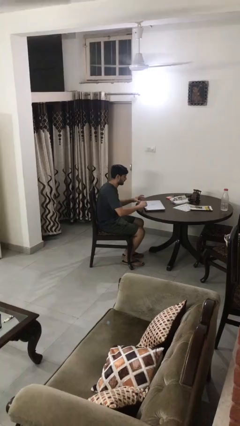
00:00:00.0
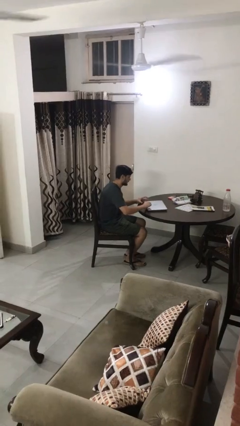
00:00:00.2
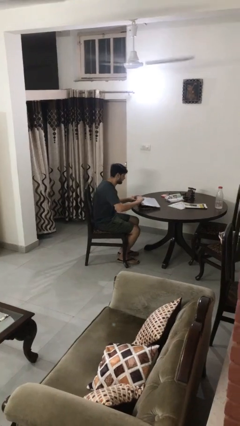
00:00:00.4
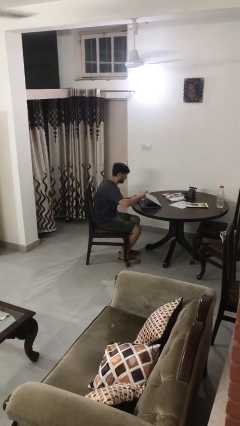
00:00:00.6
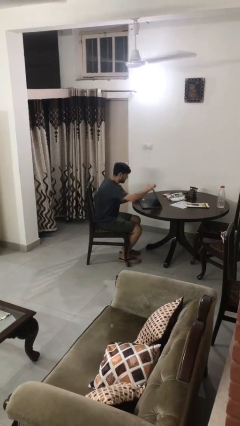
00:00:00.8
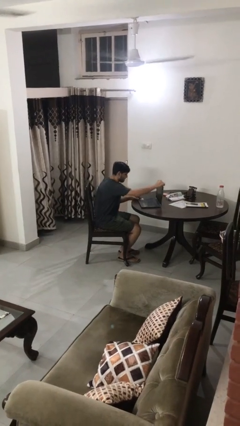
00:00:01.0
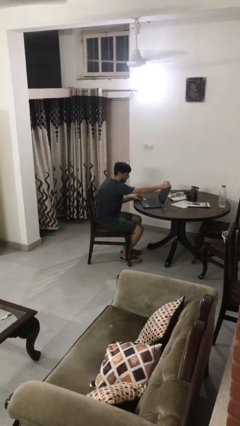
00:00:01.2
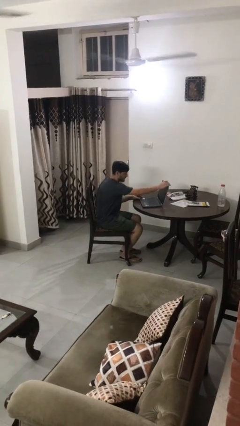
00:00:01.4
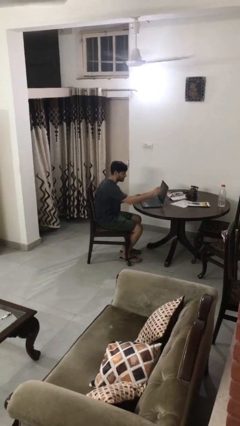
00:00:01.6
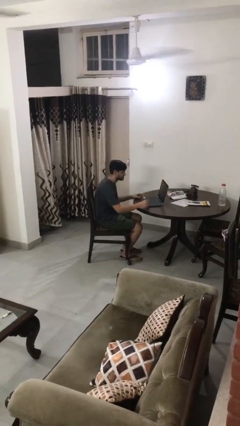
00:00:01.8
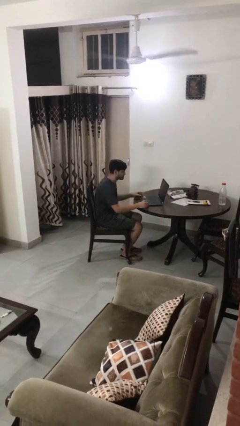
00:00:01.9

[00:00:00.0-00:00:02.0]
person opens laptop

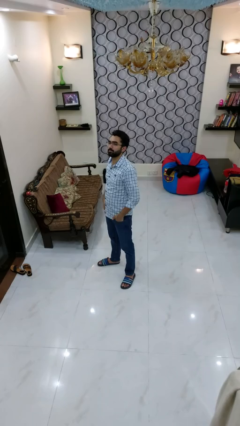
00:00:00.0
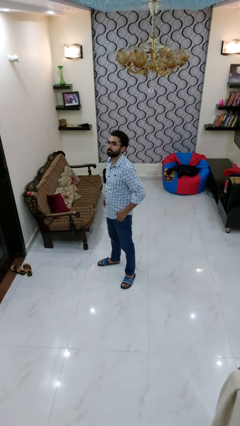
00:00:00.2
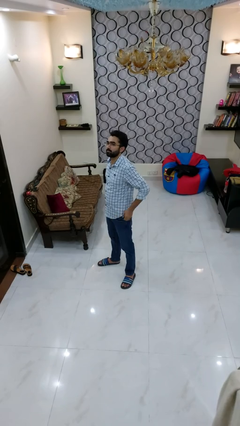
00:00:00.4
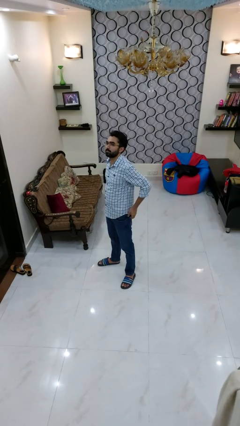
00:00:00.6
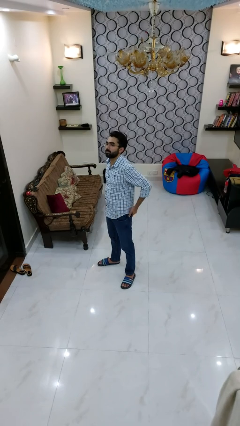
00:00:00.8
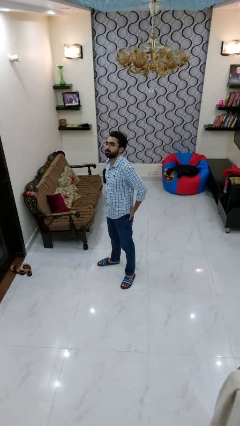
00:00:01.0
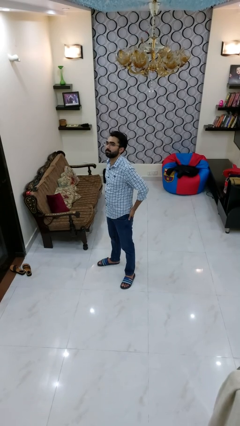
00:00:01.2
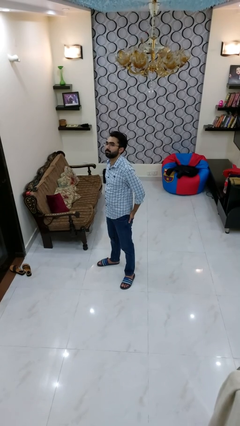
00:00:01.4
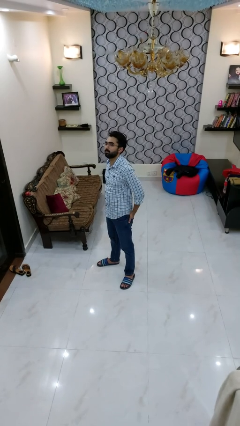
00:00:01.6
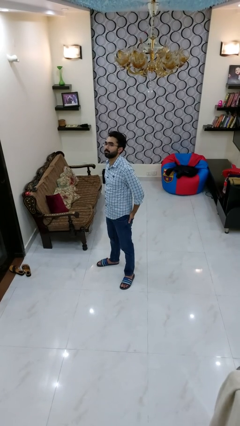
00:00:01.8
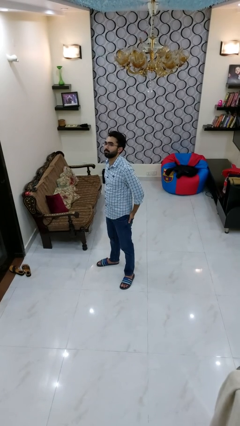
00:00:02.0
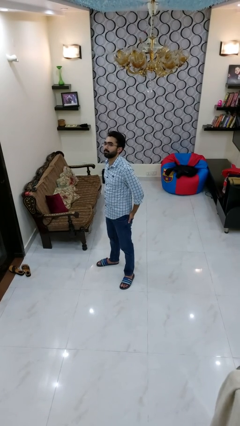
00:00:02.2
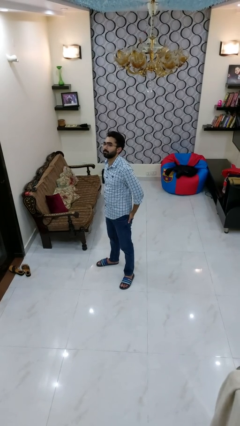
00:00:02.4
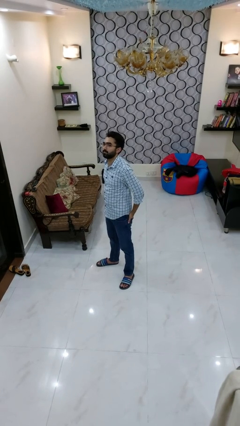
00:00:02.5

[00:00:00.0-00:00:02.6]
person puts hands in back pockets

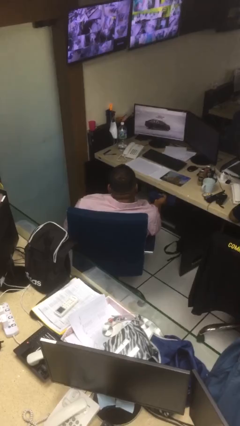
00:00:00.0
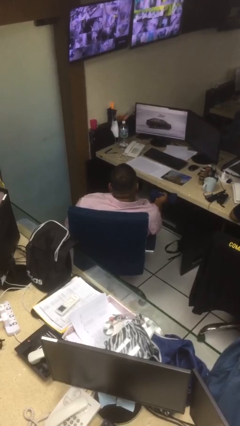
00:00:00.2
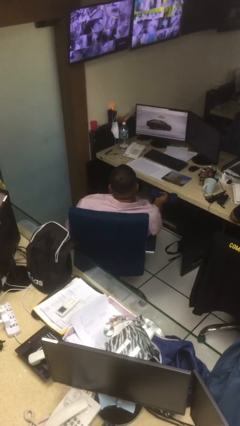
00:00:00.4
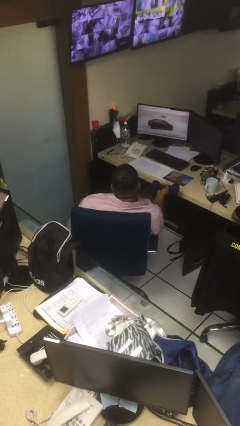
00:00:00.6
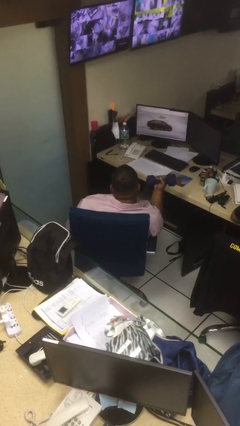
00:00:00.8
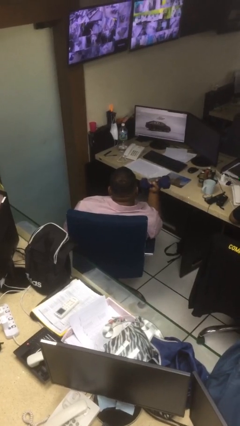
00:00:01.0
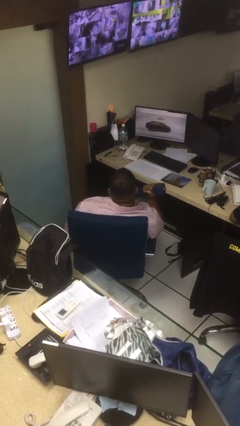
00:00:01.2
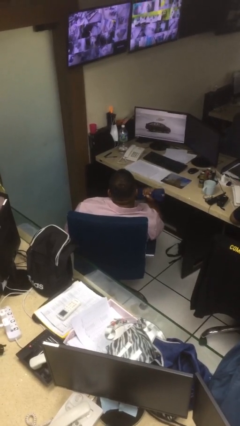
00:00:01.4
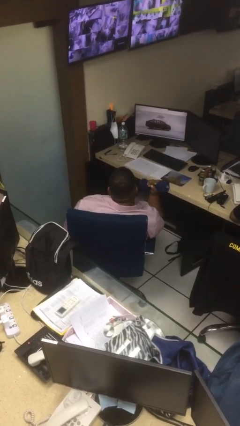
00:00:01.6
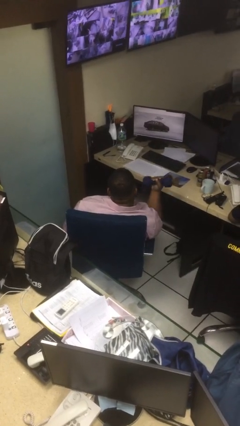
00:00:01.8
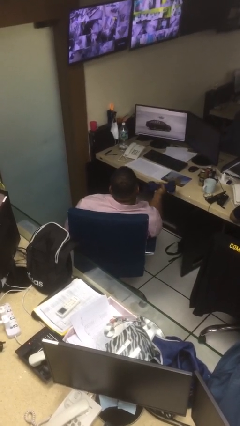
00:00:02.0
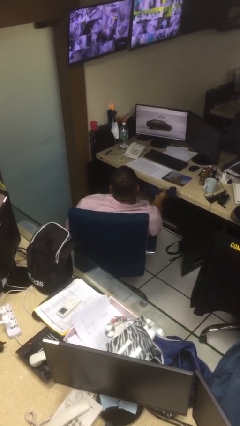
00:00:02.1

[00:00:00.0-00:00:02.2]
person lifts dumbbells

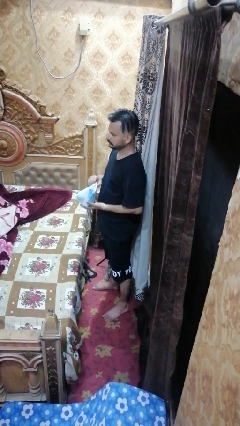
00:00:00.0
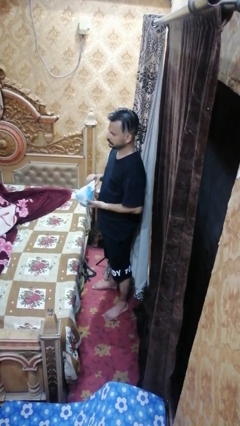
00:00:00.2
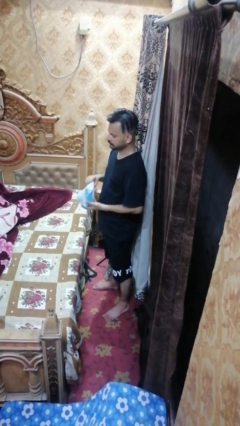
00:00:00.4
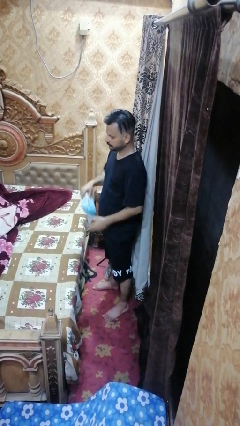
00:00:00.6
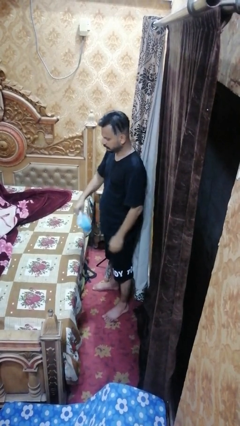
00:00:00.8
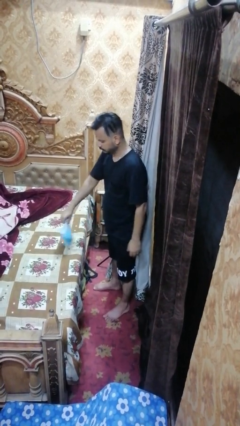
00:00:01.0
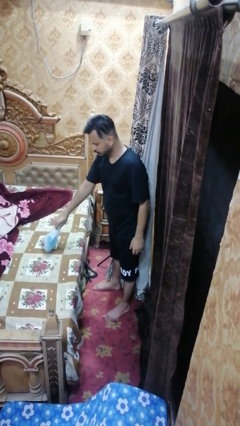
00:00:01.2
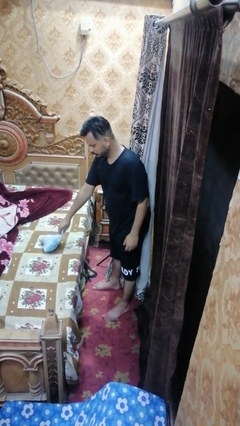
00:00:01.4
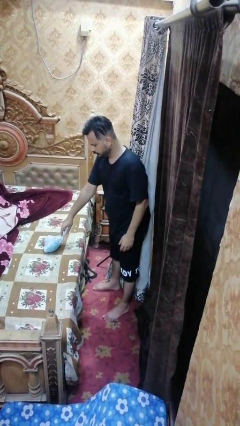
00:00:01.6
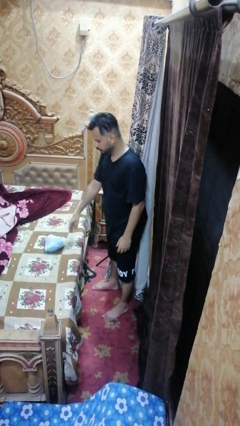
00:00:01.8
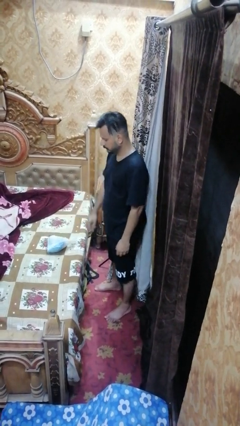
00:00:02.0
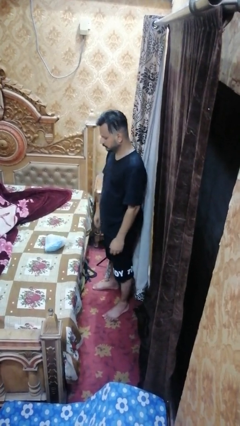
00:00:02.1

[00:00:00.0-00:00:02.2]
person puts down object on bed

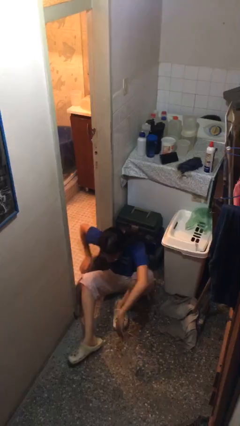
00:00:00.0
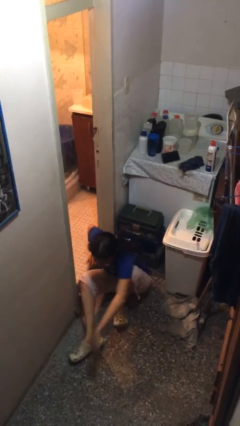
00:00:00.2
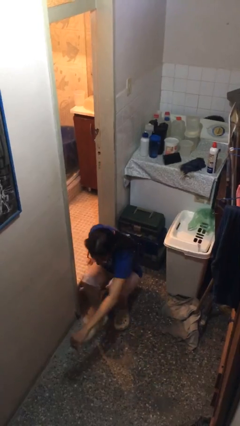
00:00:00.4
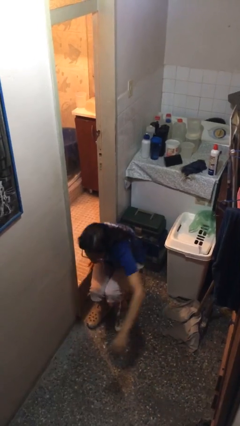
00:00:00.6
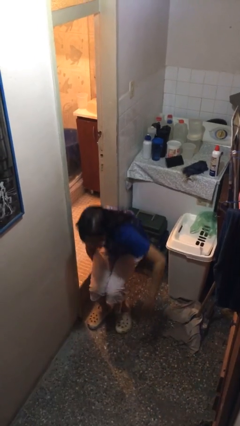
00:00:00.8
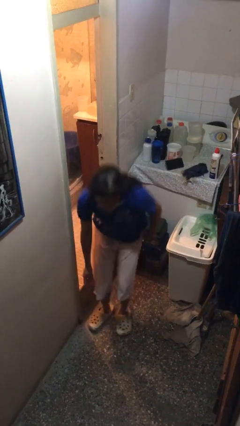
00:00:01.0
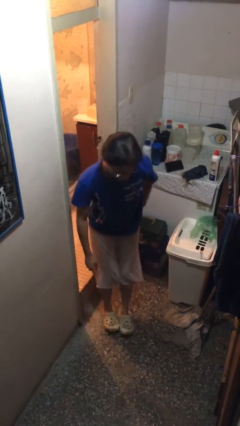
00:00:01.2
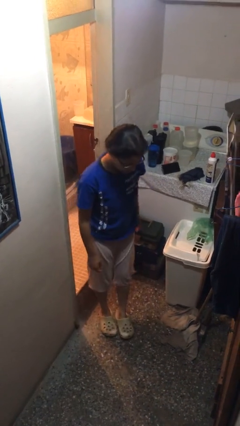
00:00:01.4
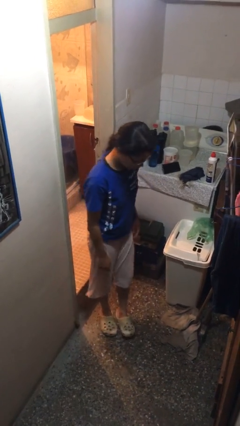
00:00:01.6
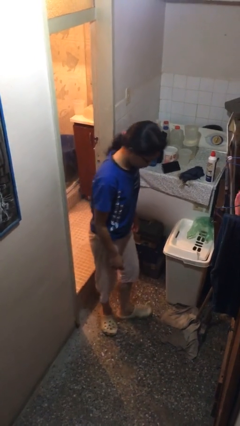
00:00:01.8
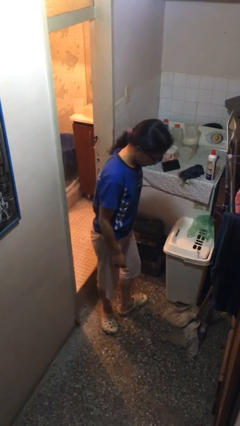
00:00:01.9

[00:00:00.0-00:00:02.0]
person stands up

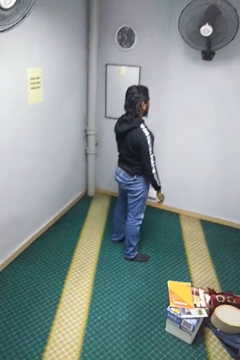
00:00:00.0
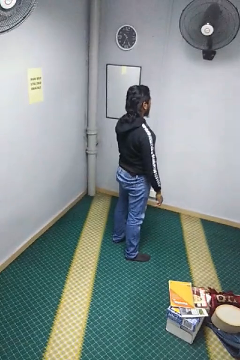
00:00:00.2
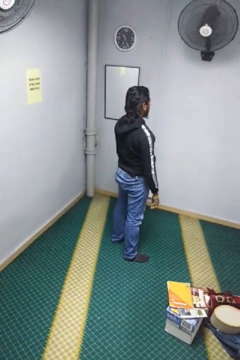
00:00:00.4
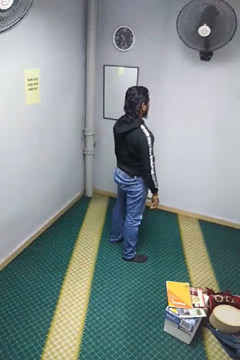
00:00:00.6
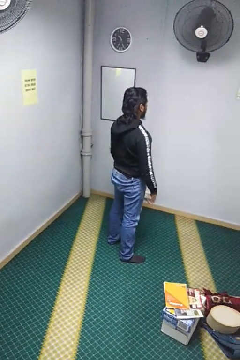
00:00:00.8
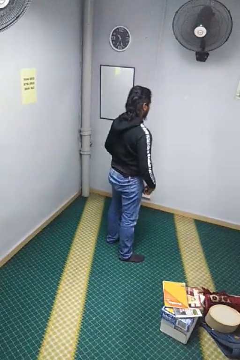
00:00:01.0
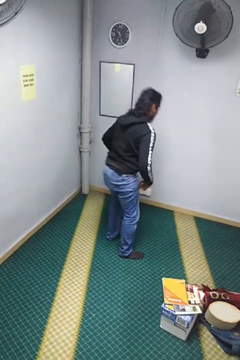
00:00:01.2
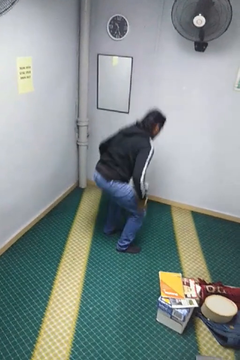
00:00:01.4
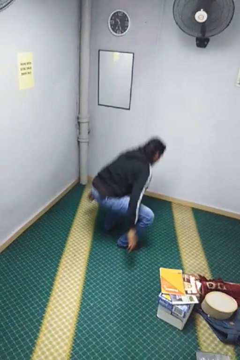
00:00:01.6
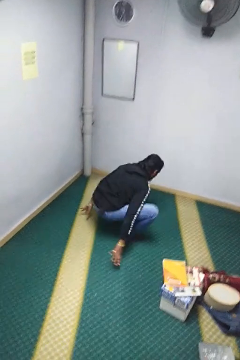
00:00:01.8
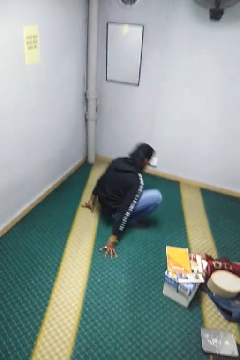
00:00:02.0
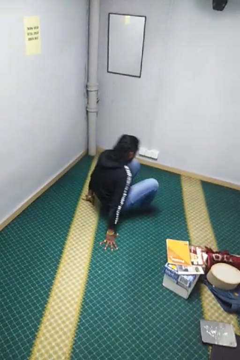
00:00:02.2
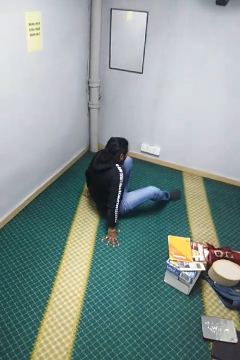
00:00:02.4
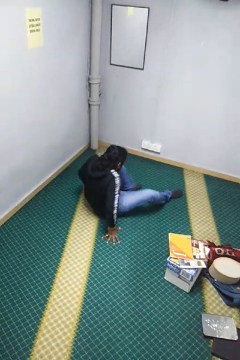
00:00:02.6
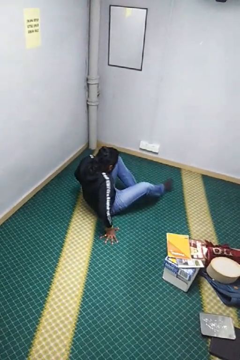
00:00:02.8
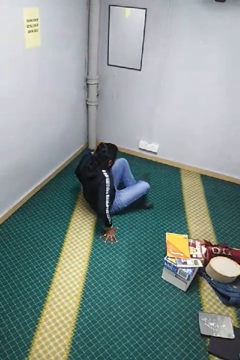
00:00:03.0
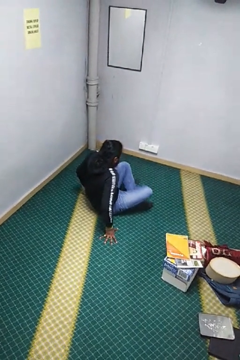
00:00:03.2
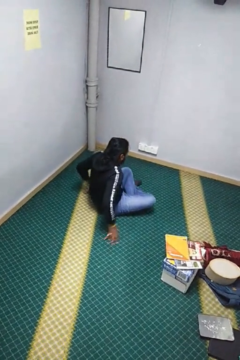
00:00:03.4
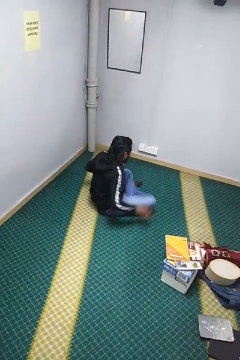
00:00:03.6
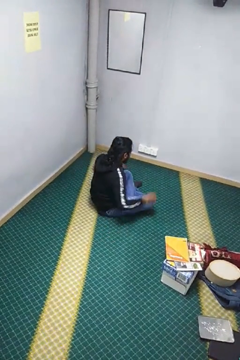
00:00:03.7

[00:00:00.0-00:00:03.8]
person sits crisscross

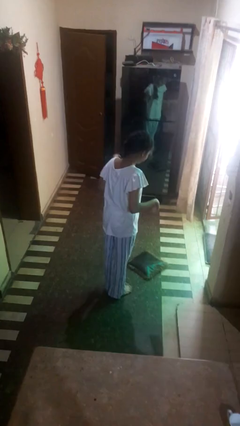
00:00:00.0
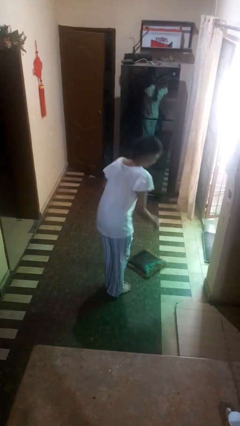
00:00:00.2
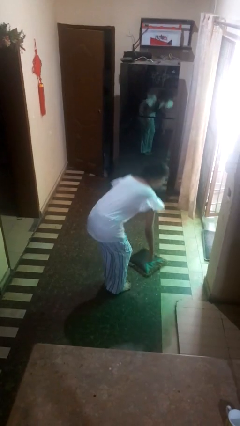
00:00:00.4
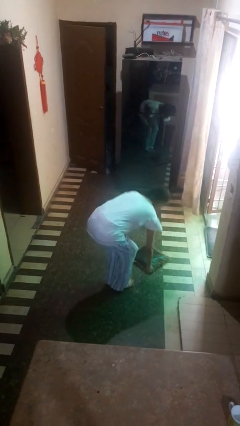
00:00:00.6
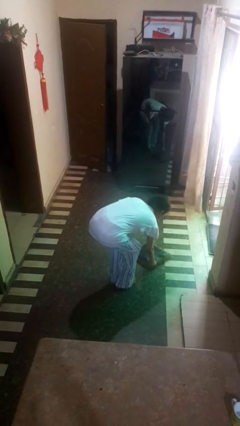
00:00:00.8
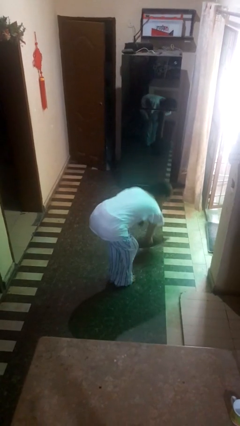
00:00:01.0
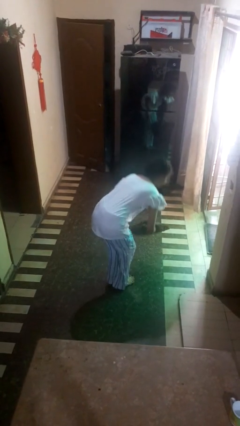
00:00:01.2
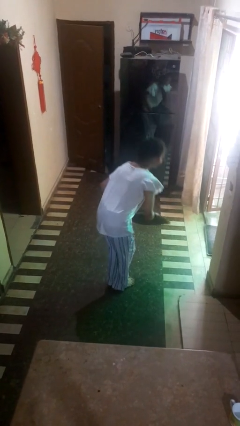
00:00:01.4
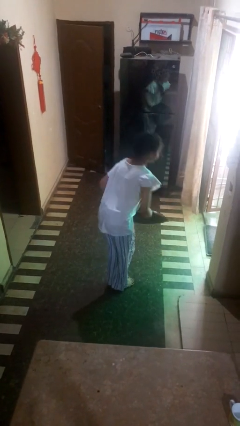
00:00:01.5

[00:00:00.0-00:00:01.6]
person picks up object from floor

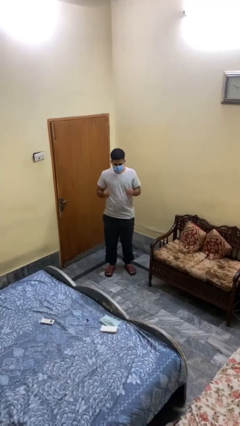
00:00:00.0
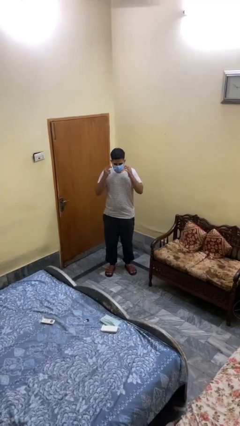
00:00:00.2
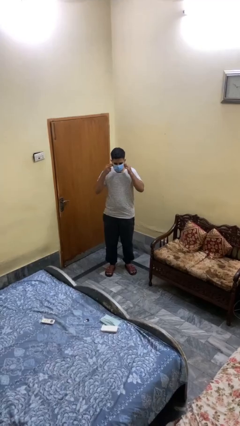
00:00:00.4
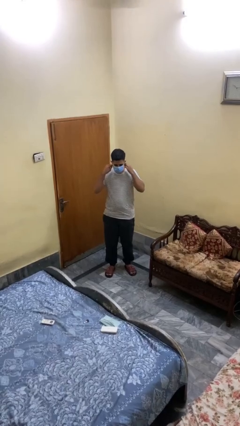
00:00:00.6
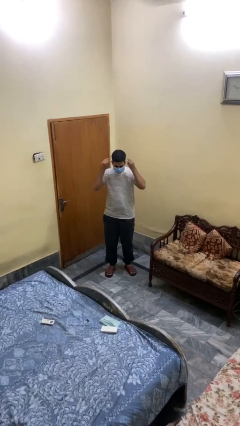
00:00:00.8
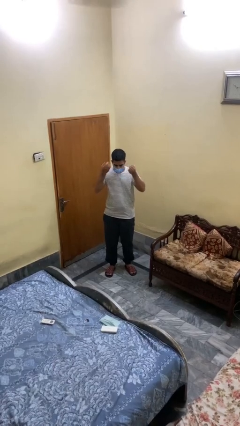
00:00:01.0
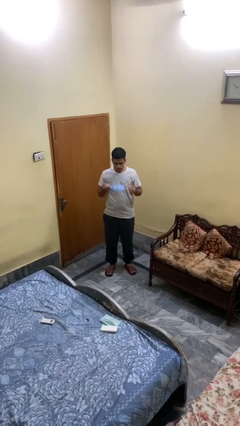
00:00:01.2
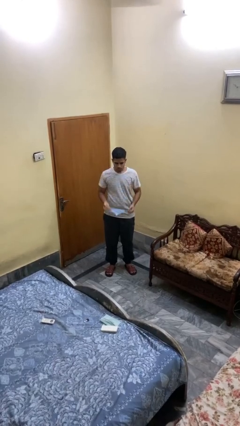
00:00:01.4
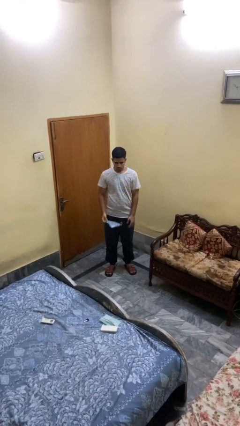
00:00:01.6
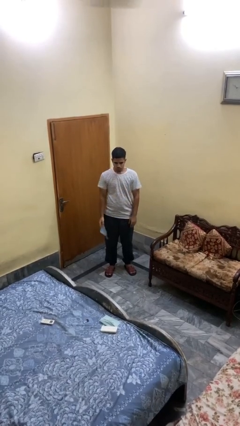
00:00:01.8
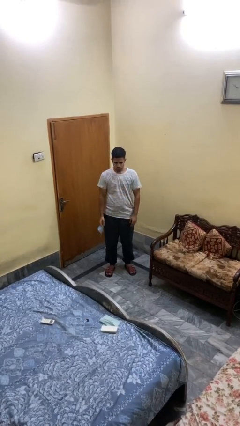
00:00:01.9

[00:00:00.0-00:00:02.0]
person takes off facemask
